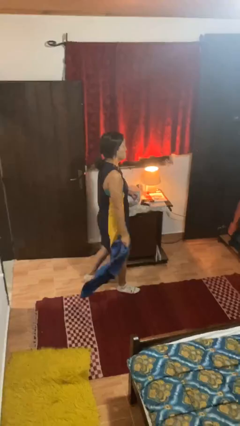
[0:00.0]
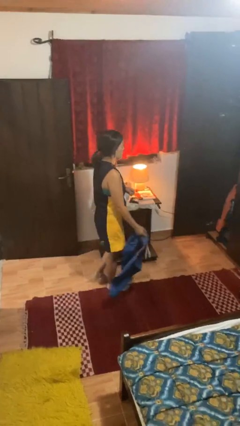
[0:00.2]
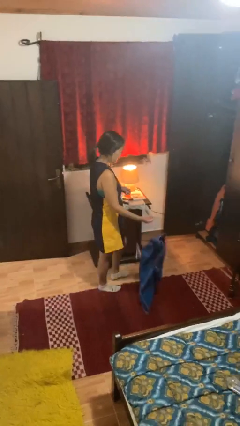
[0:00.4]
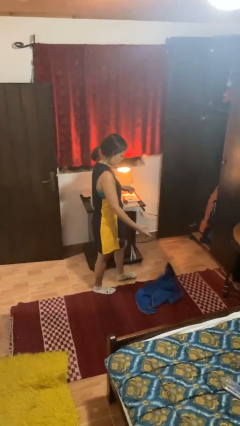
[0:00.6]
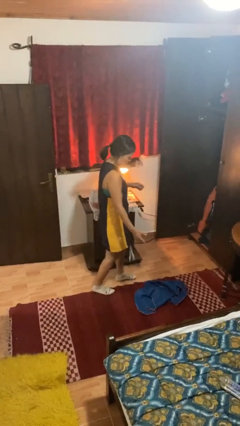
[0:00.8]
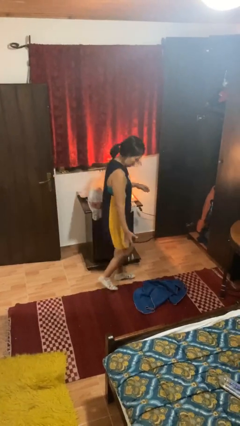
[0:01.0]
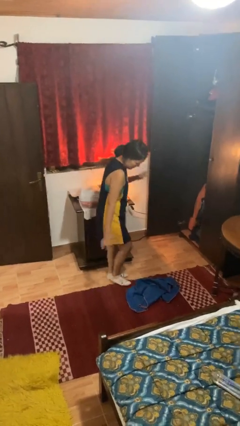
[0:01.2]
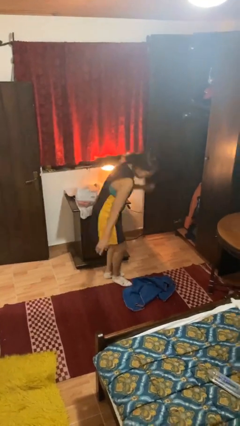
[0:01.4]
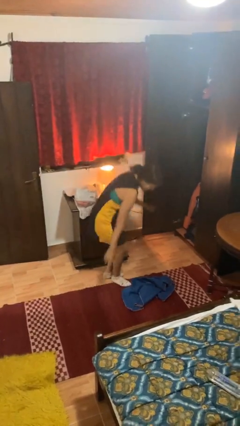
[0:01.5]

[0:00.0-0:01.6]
person drops object

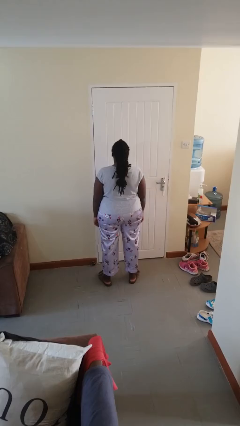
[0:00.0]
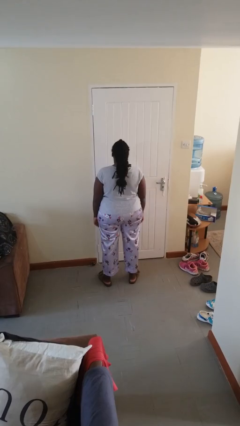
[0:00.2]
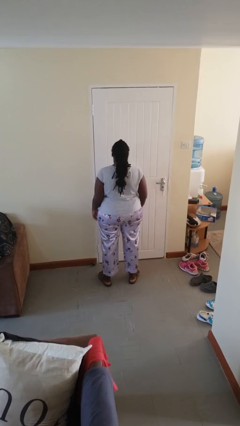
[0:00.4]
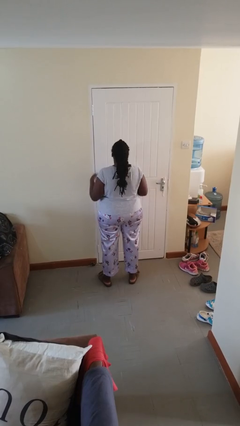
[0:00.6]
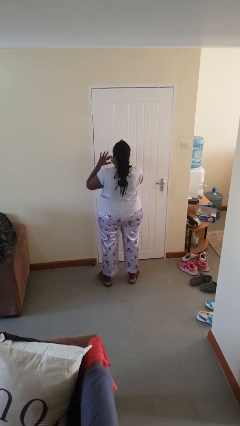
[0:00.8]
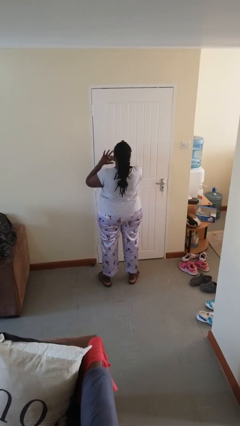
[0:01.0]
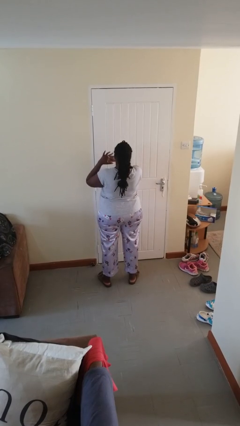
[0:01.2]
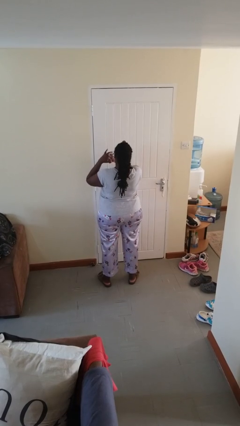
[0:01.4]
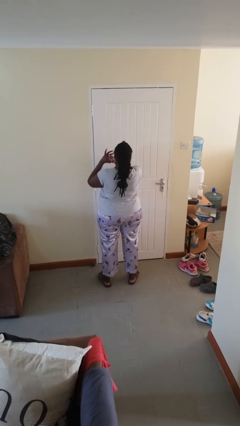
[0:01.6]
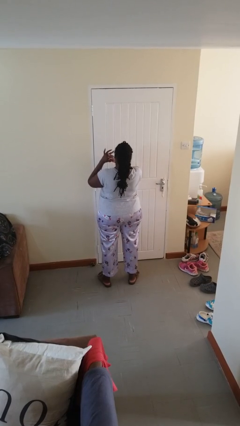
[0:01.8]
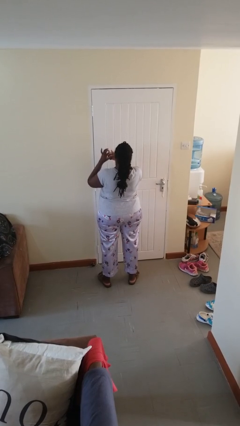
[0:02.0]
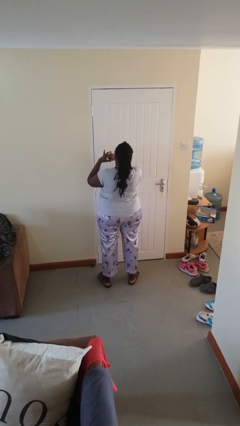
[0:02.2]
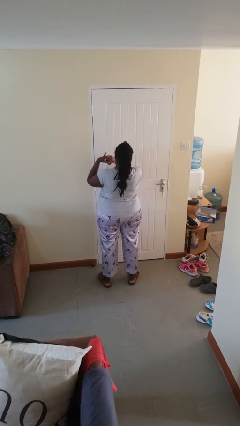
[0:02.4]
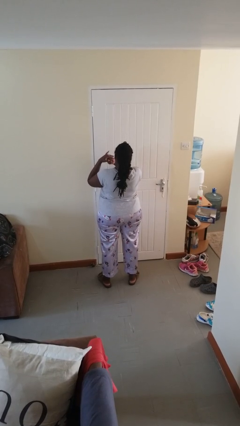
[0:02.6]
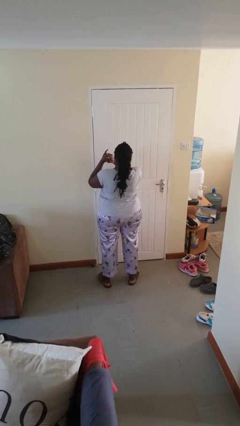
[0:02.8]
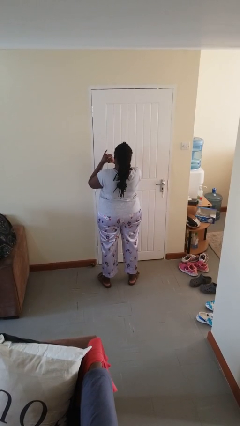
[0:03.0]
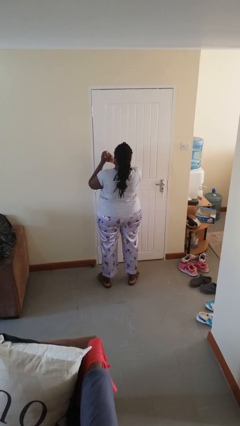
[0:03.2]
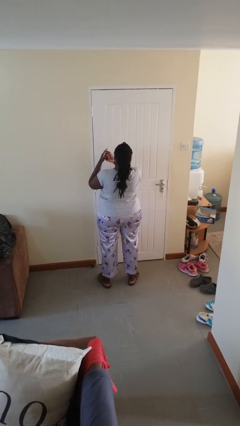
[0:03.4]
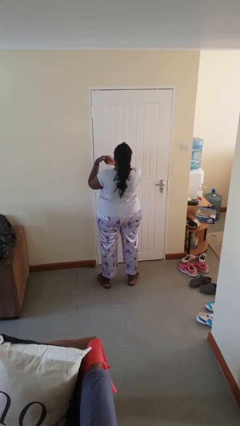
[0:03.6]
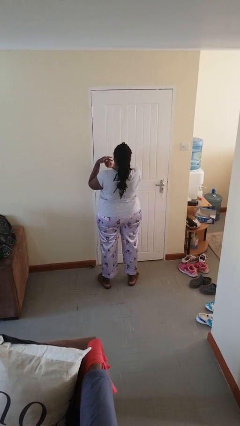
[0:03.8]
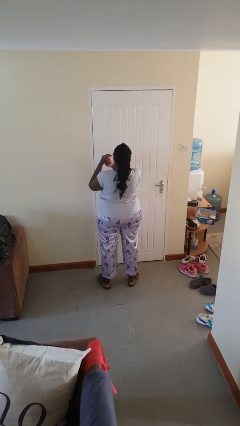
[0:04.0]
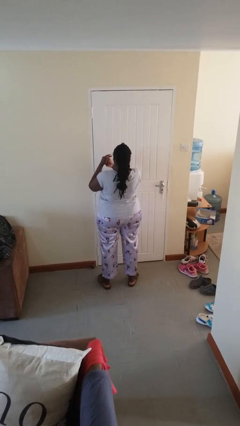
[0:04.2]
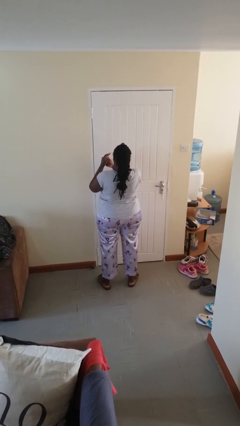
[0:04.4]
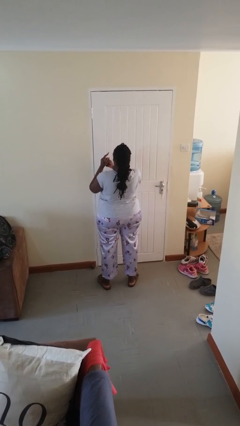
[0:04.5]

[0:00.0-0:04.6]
person cracks knuckles

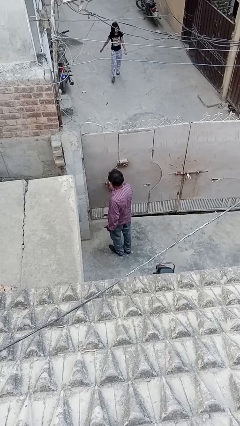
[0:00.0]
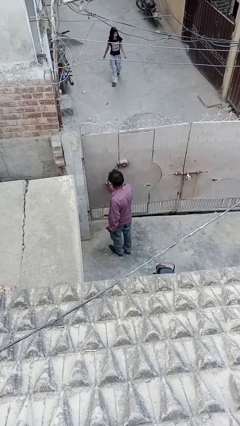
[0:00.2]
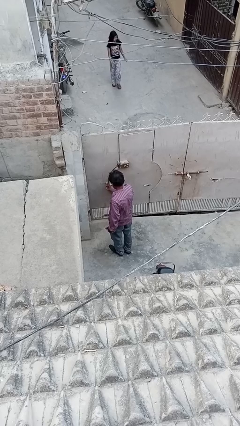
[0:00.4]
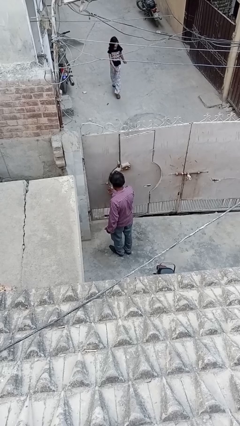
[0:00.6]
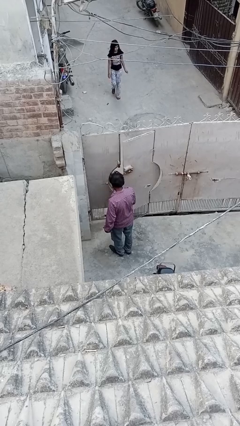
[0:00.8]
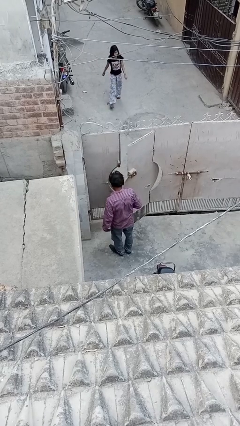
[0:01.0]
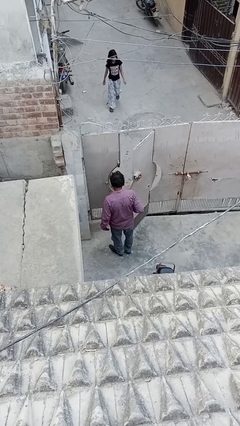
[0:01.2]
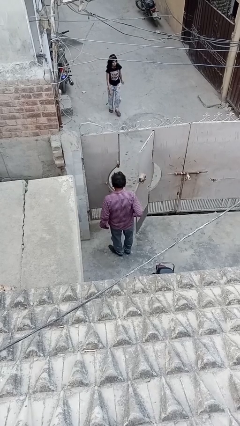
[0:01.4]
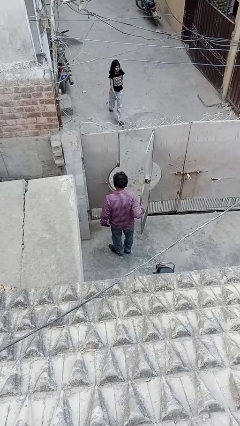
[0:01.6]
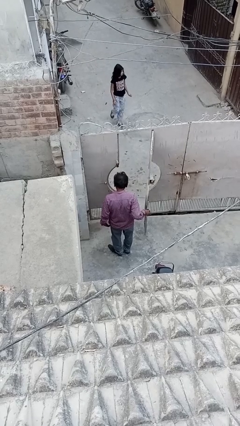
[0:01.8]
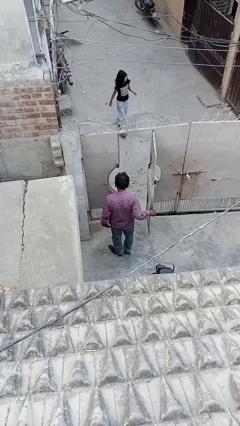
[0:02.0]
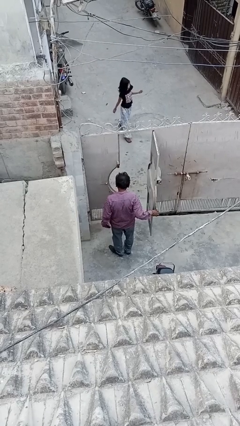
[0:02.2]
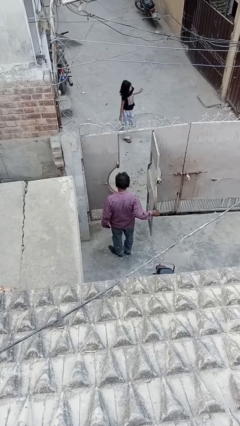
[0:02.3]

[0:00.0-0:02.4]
person opens facility door

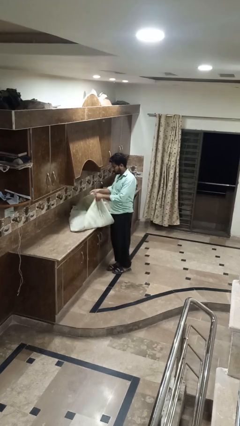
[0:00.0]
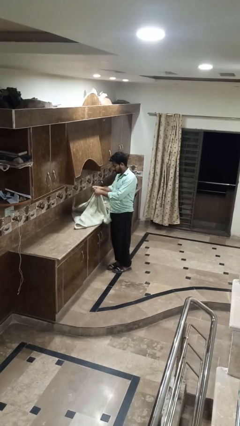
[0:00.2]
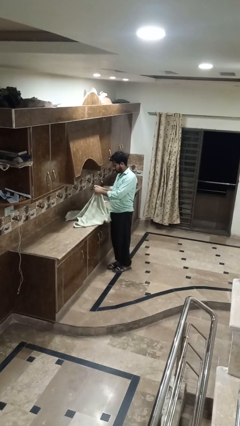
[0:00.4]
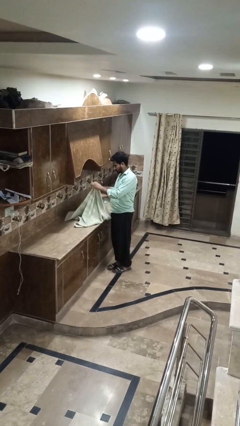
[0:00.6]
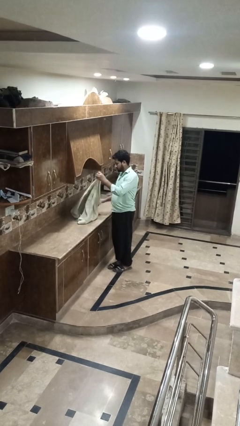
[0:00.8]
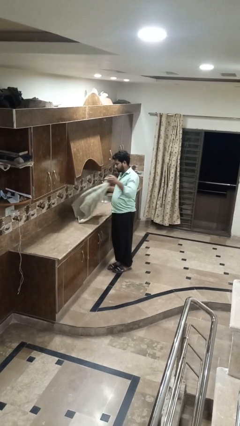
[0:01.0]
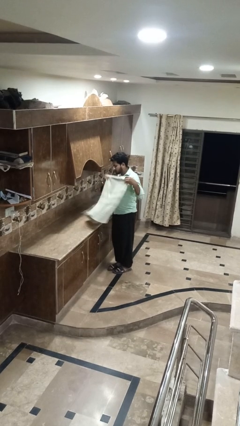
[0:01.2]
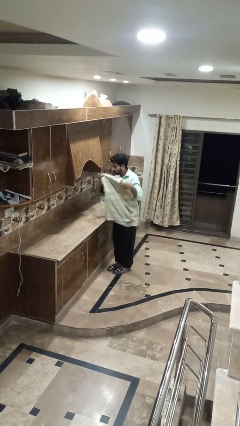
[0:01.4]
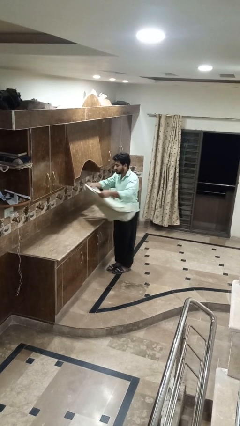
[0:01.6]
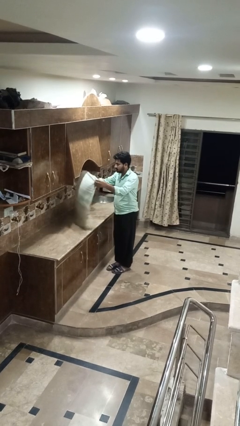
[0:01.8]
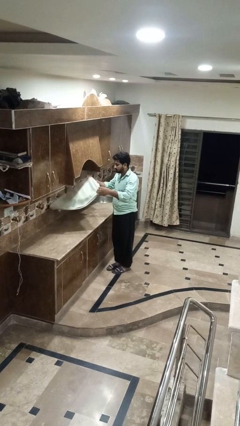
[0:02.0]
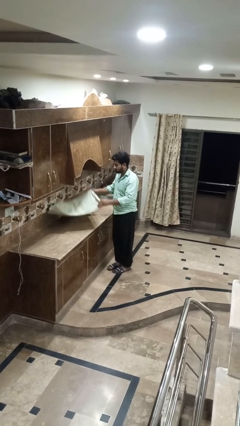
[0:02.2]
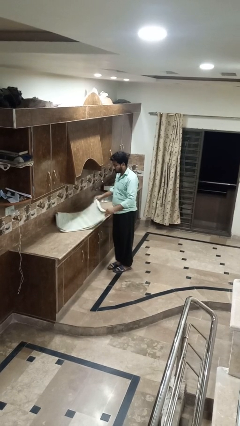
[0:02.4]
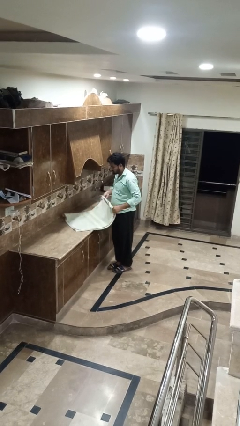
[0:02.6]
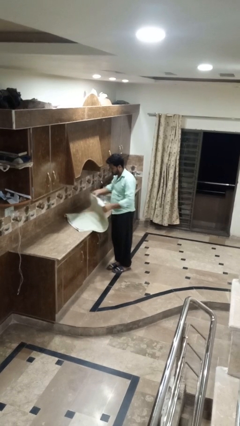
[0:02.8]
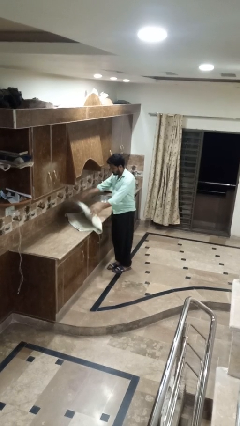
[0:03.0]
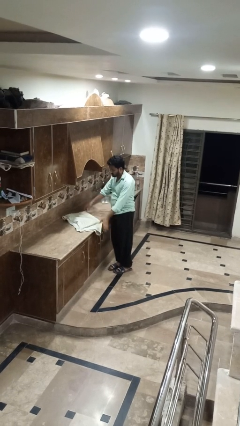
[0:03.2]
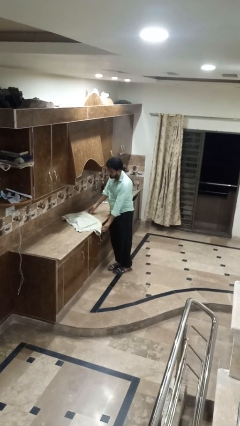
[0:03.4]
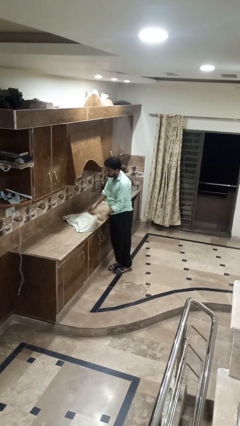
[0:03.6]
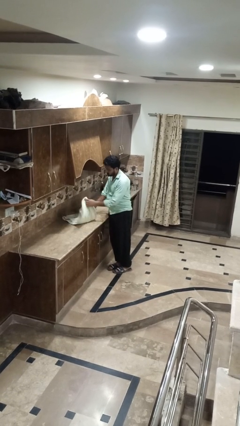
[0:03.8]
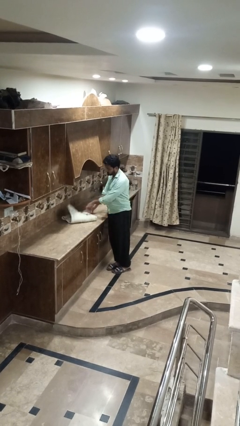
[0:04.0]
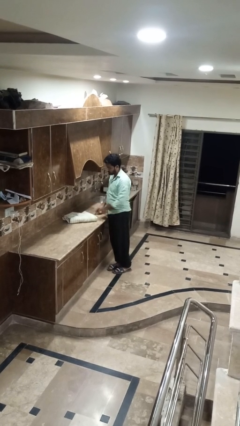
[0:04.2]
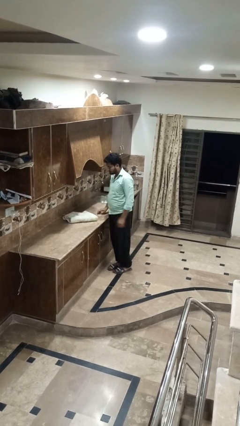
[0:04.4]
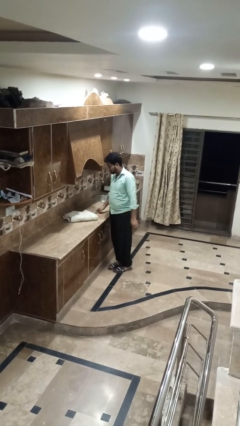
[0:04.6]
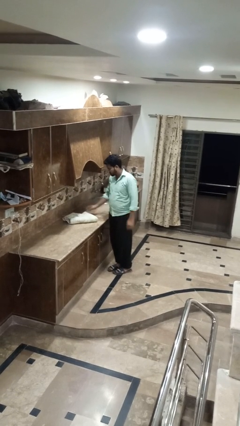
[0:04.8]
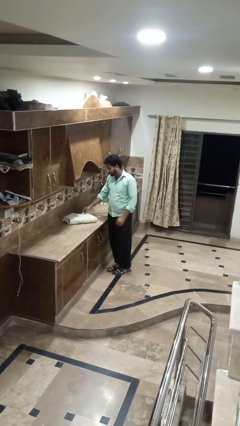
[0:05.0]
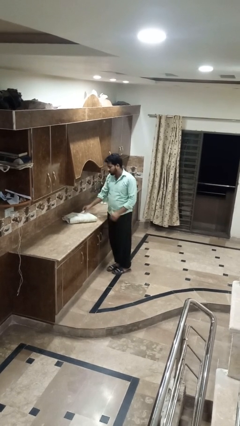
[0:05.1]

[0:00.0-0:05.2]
person folds towel

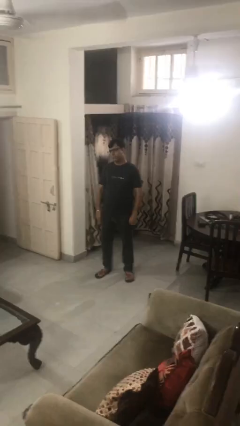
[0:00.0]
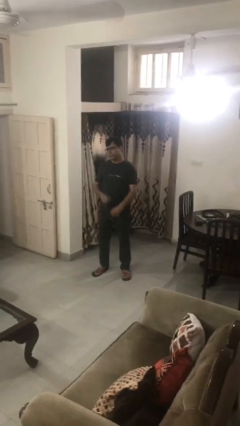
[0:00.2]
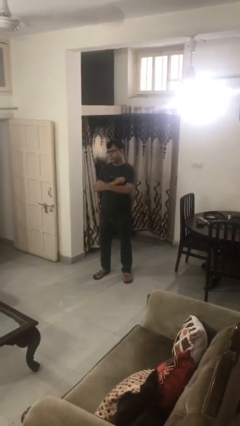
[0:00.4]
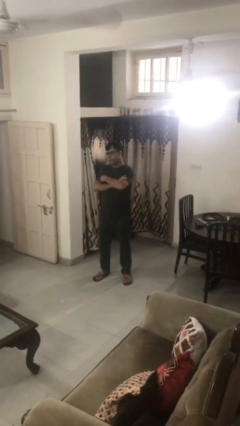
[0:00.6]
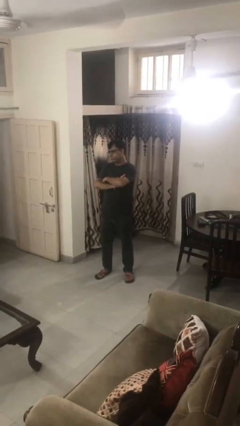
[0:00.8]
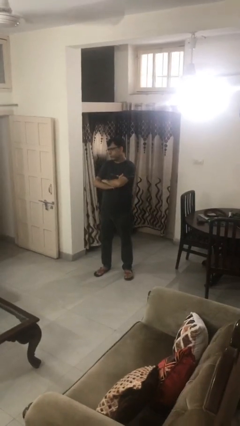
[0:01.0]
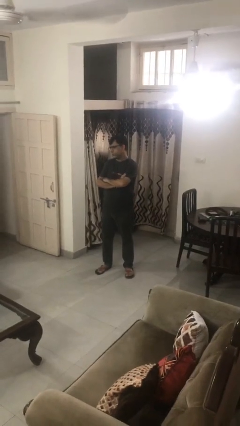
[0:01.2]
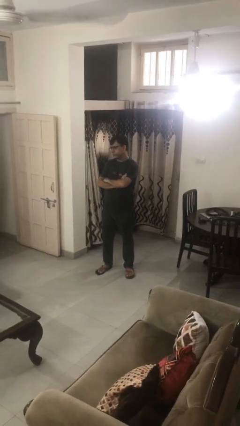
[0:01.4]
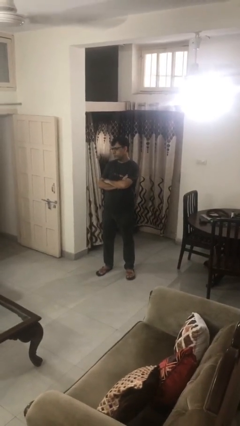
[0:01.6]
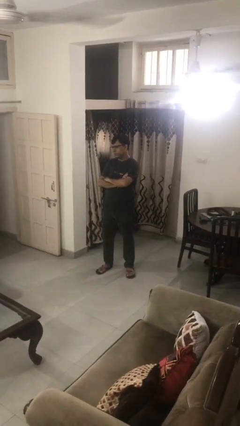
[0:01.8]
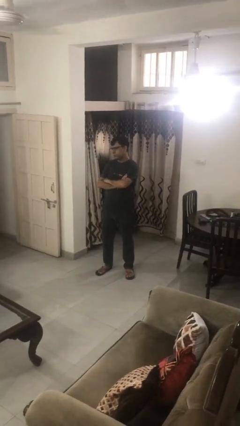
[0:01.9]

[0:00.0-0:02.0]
person crosses arms

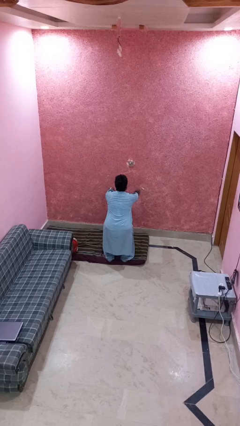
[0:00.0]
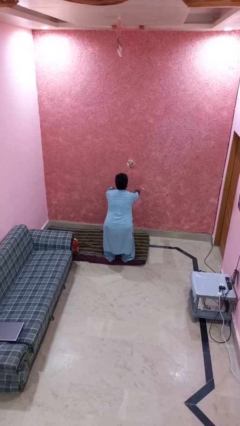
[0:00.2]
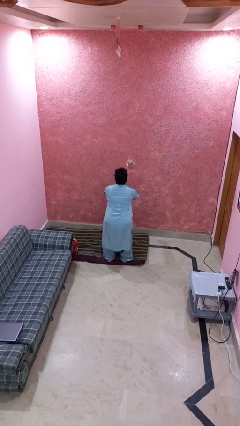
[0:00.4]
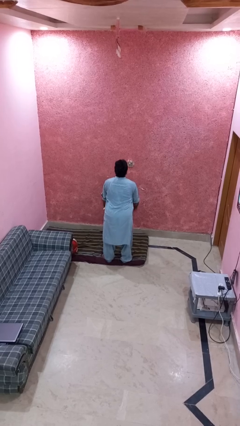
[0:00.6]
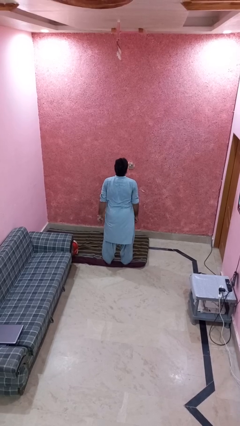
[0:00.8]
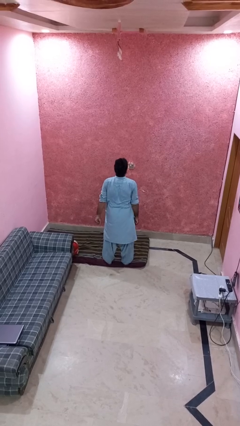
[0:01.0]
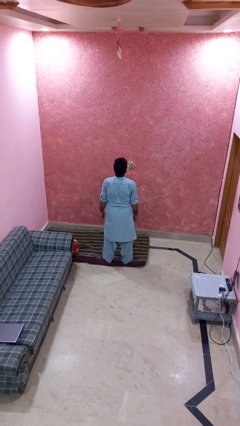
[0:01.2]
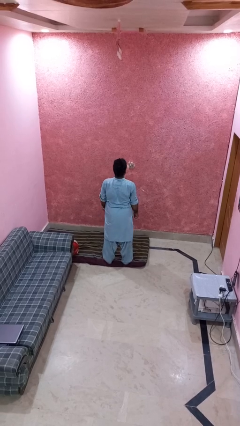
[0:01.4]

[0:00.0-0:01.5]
person stands up
